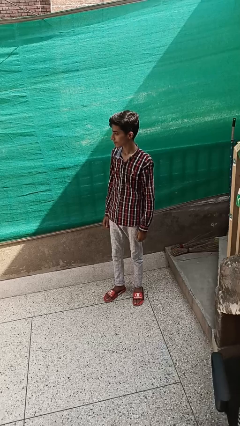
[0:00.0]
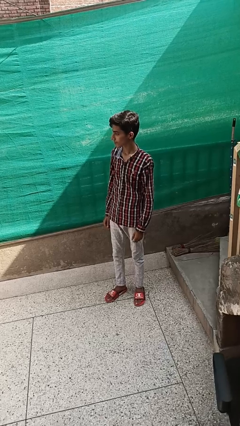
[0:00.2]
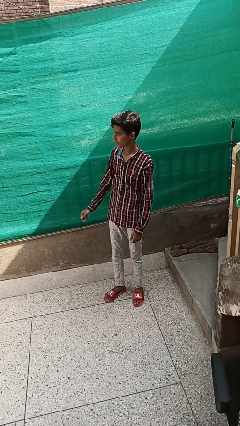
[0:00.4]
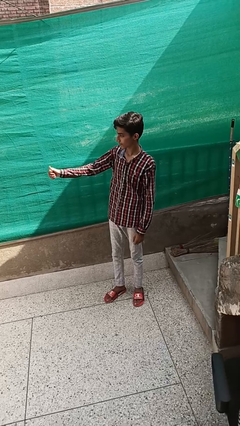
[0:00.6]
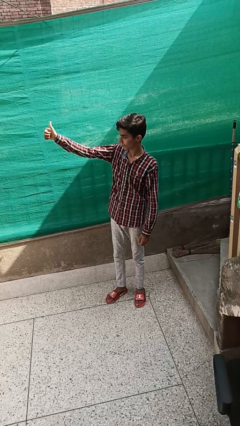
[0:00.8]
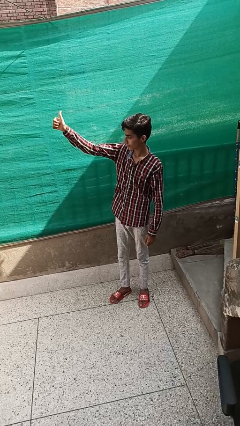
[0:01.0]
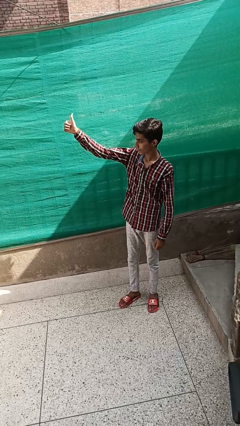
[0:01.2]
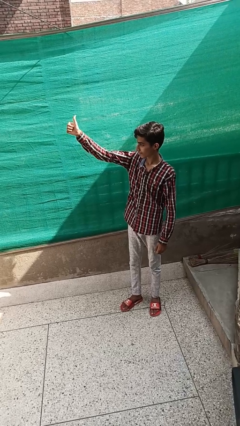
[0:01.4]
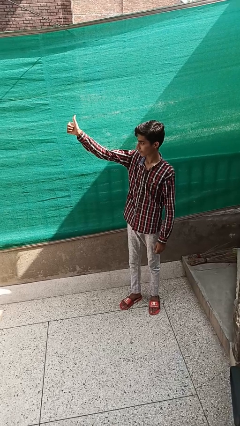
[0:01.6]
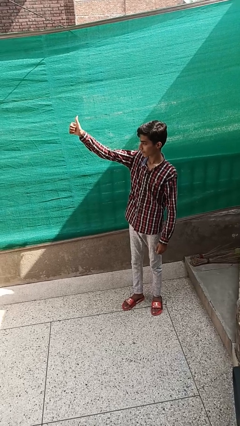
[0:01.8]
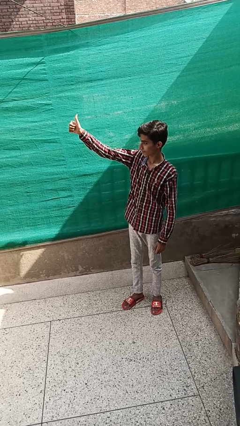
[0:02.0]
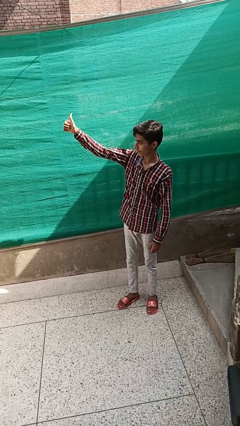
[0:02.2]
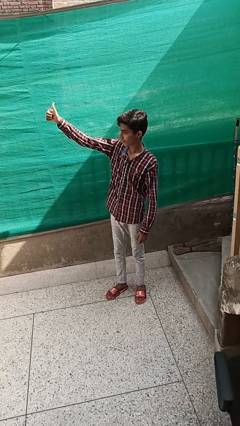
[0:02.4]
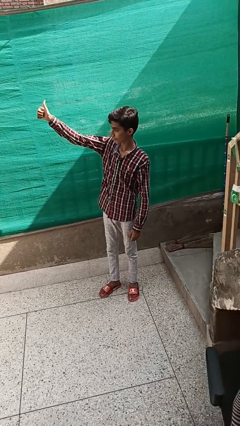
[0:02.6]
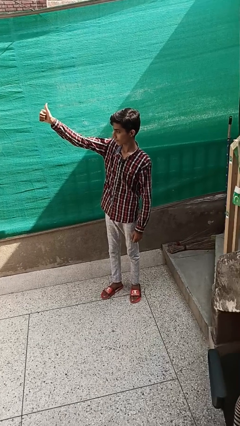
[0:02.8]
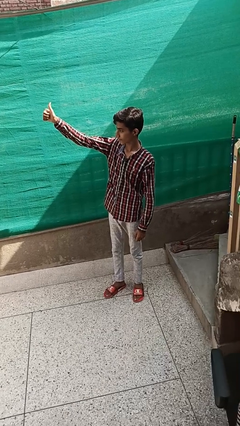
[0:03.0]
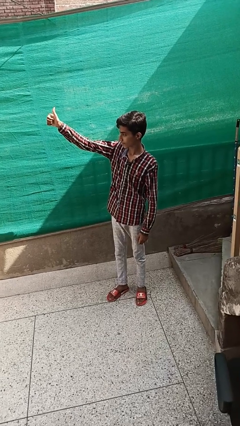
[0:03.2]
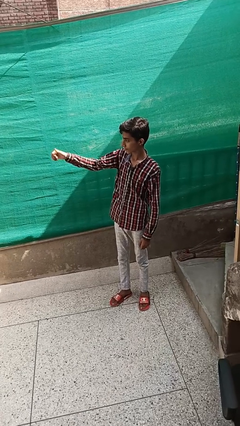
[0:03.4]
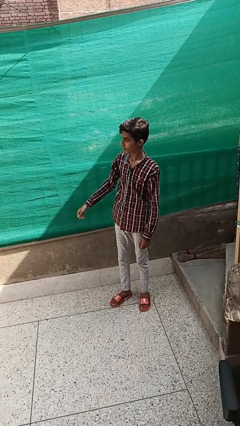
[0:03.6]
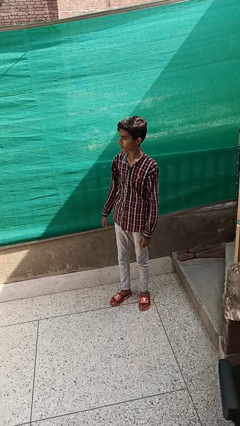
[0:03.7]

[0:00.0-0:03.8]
person gestures thumbs up

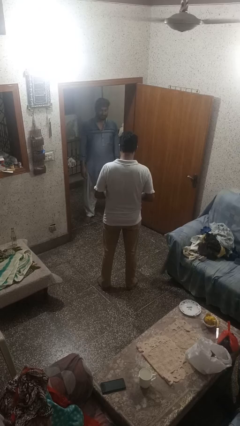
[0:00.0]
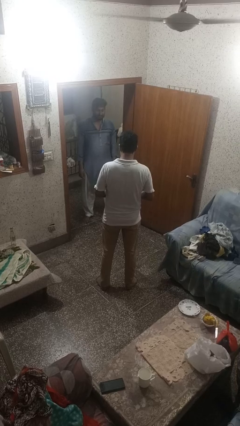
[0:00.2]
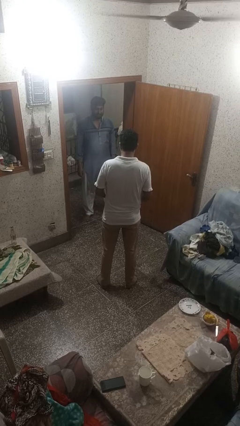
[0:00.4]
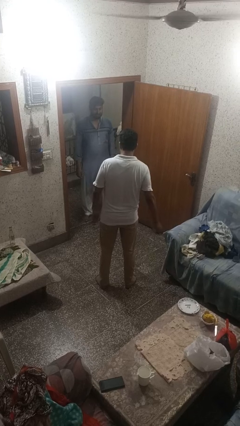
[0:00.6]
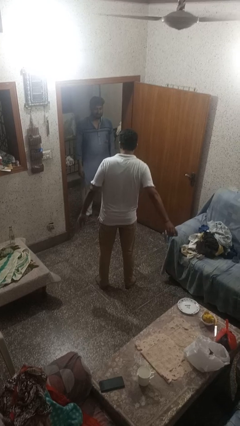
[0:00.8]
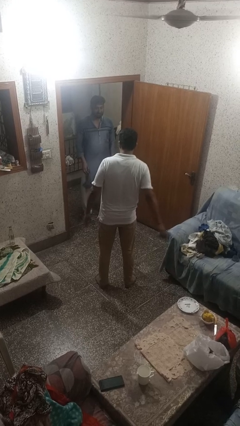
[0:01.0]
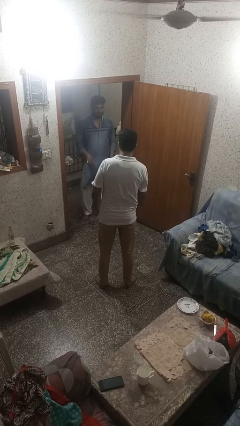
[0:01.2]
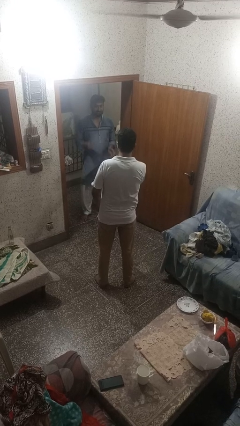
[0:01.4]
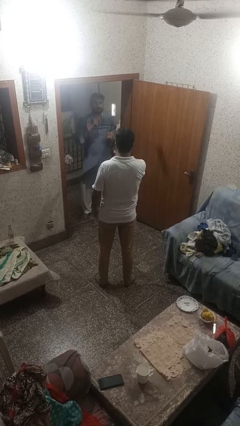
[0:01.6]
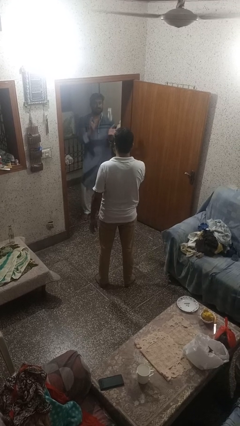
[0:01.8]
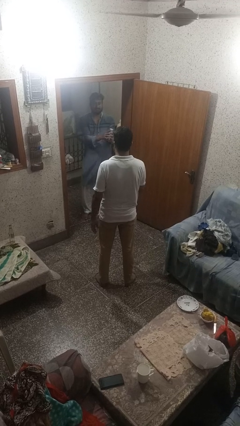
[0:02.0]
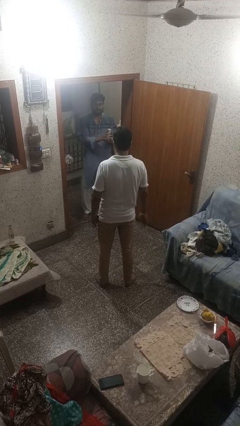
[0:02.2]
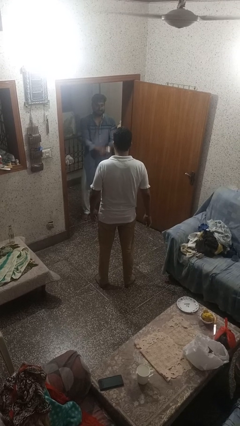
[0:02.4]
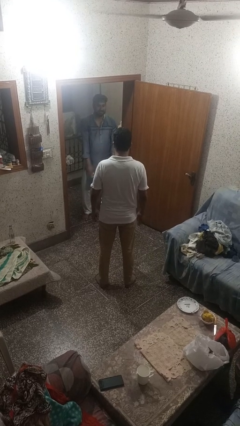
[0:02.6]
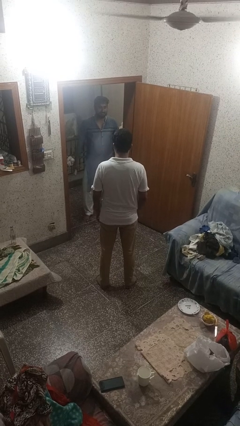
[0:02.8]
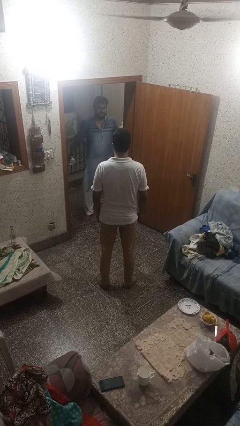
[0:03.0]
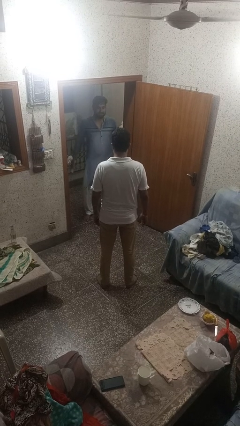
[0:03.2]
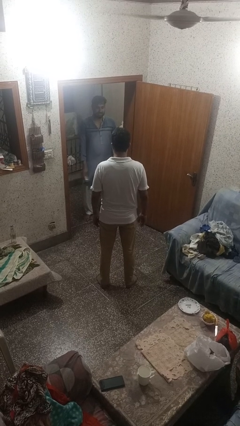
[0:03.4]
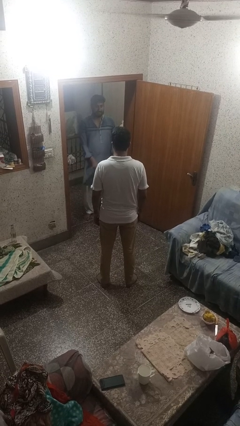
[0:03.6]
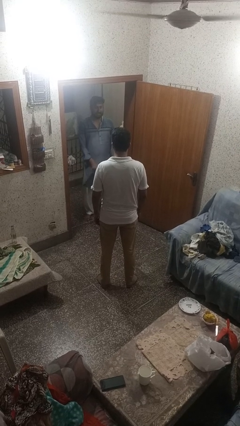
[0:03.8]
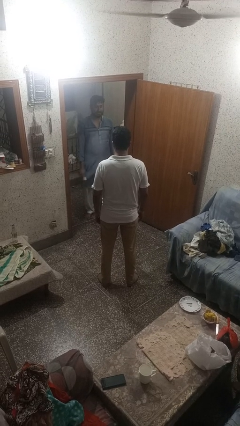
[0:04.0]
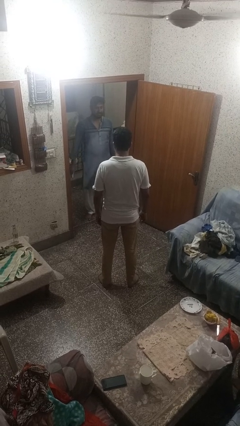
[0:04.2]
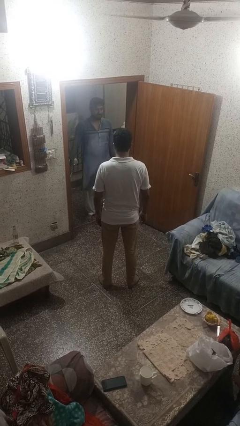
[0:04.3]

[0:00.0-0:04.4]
person throws object to person

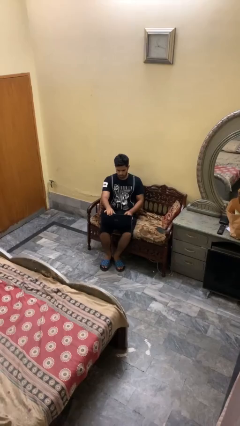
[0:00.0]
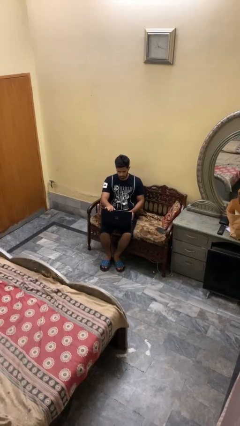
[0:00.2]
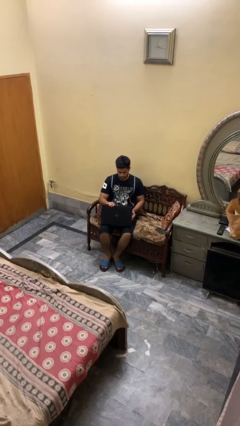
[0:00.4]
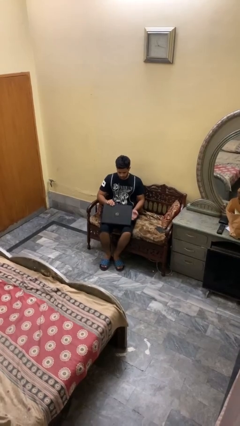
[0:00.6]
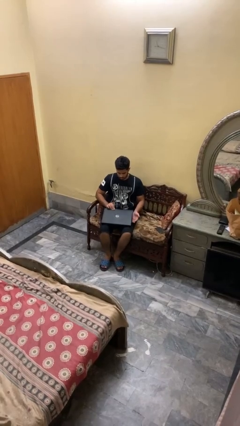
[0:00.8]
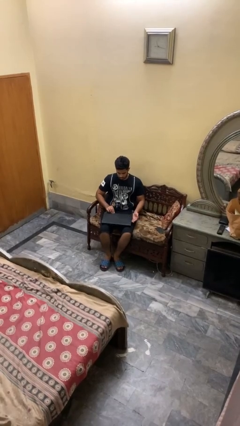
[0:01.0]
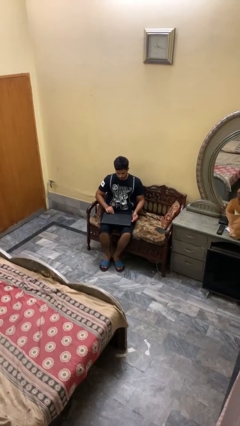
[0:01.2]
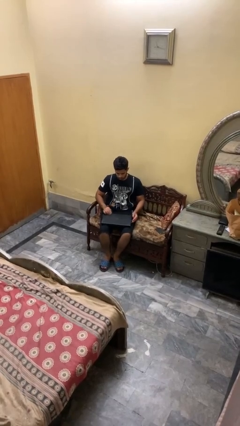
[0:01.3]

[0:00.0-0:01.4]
person closes laptop

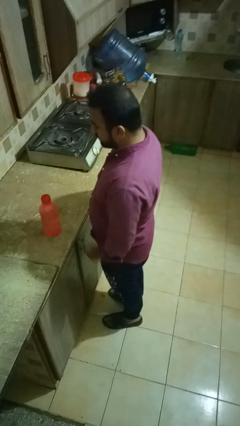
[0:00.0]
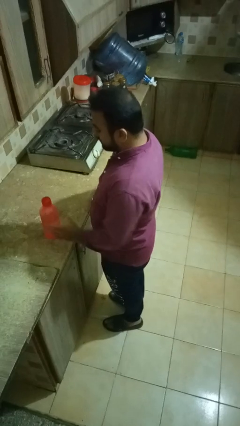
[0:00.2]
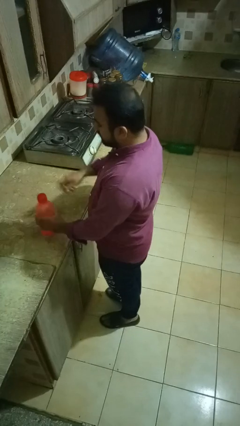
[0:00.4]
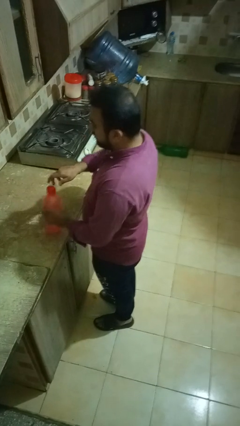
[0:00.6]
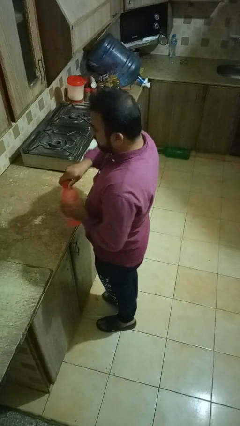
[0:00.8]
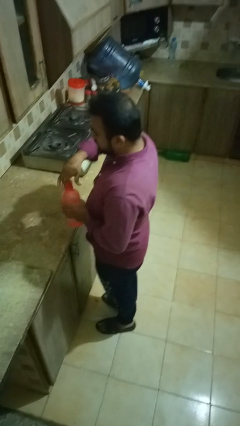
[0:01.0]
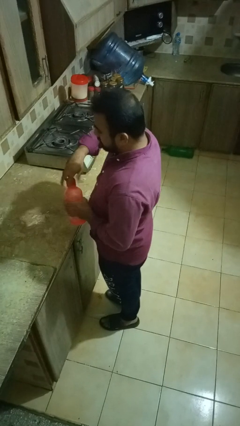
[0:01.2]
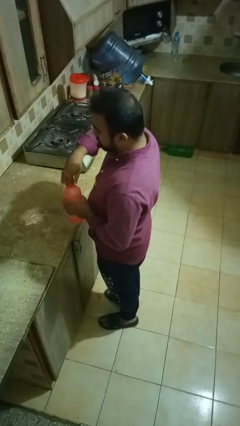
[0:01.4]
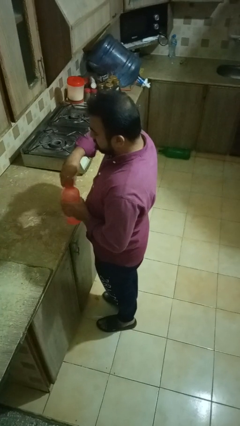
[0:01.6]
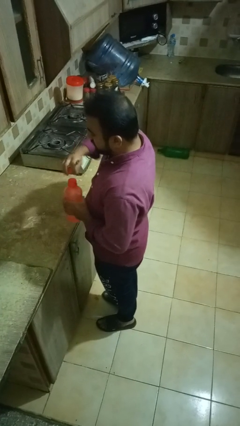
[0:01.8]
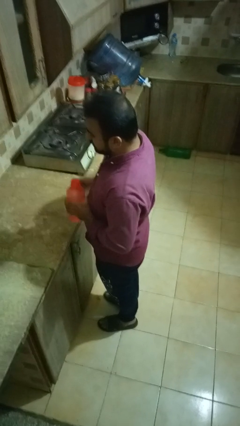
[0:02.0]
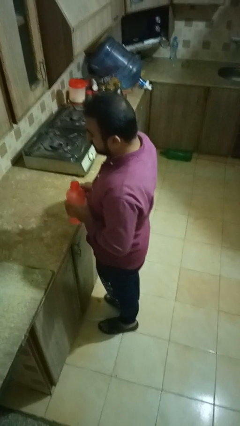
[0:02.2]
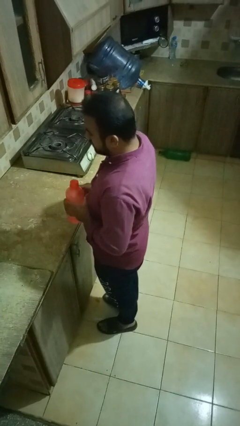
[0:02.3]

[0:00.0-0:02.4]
person unscrews lid from bottle

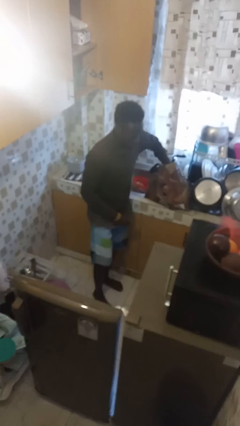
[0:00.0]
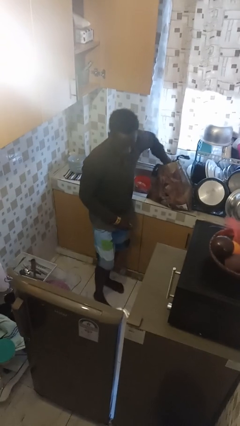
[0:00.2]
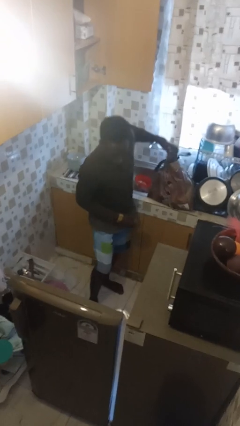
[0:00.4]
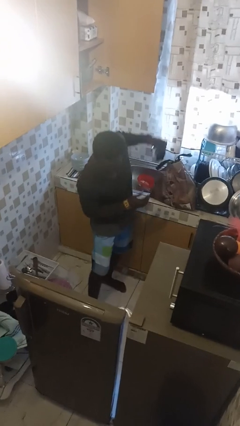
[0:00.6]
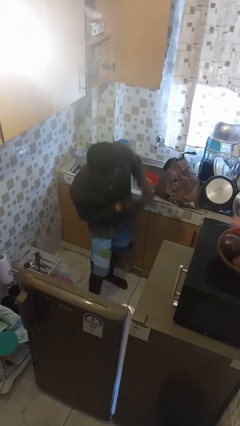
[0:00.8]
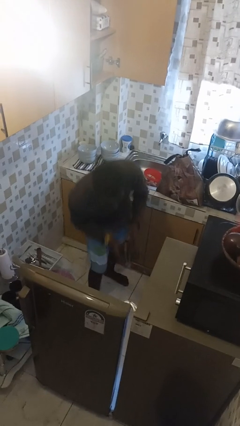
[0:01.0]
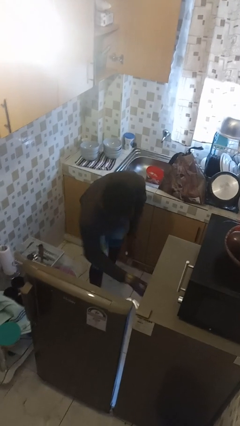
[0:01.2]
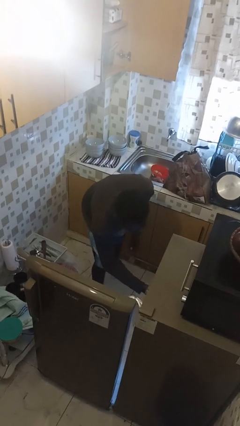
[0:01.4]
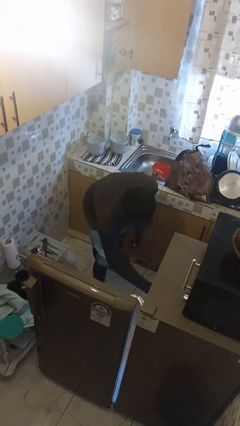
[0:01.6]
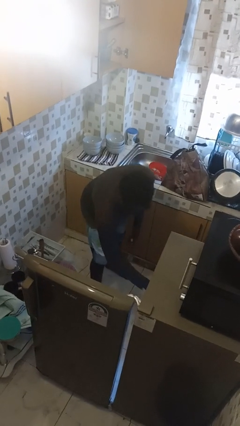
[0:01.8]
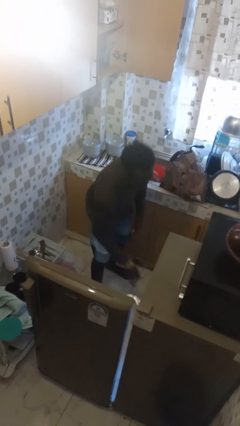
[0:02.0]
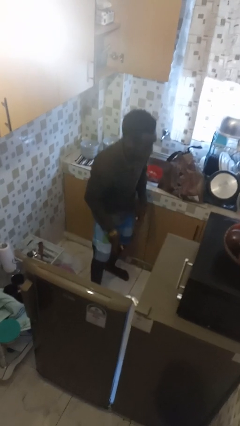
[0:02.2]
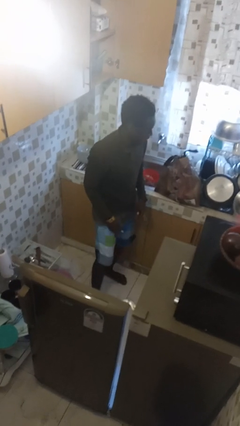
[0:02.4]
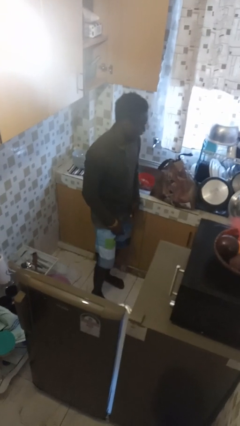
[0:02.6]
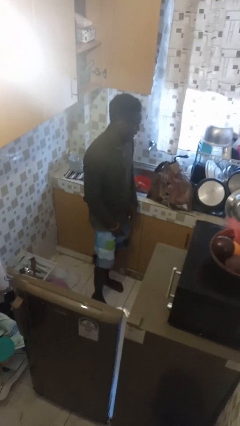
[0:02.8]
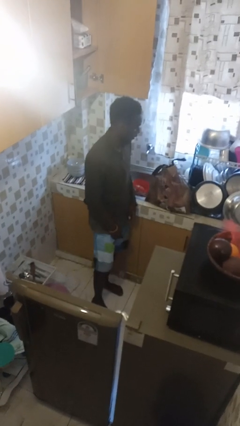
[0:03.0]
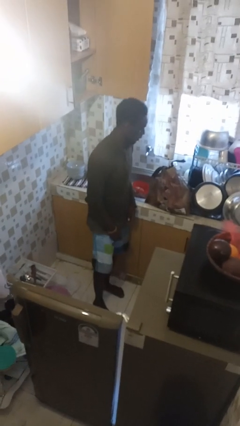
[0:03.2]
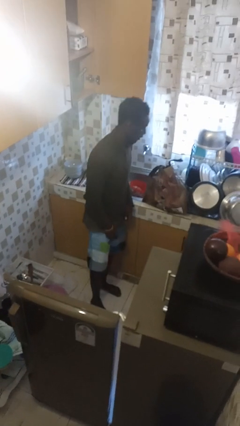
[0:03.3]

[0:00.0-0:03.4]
person loads groceries into refrigerator

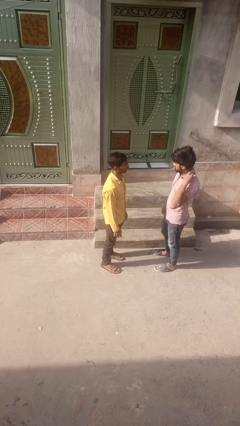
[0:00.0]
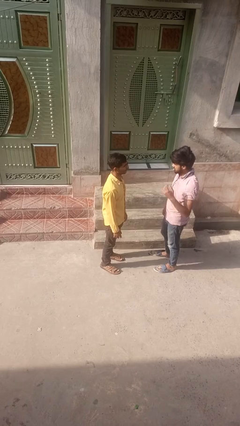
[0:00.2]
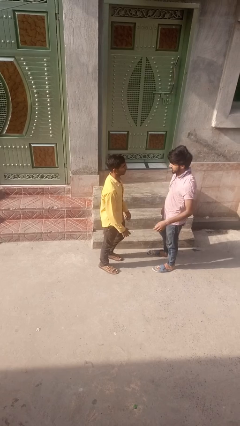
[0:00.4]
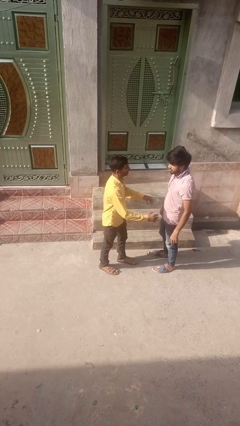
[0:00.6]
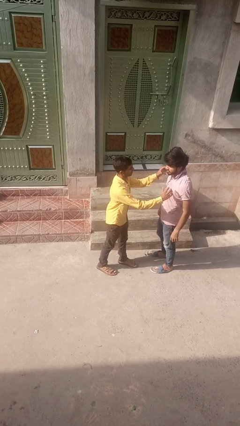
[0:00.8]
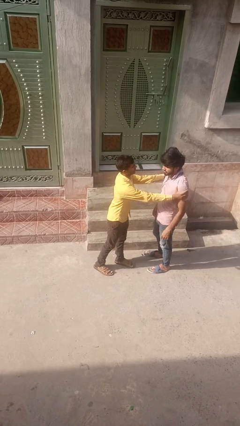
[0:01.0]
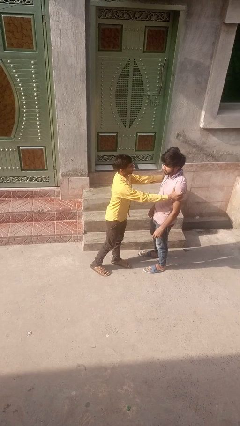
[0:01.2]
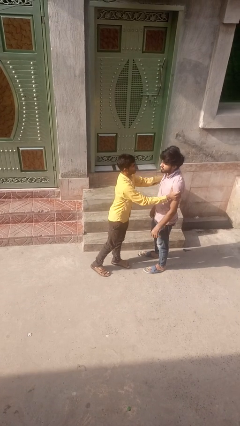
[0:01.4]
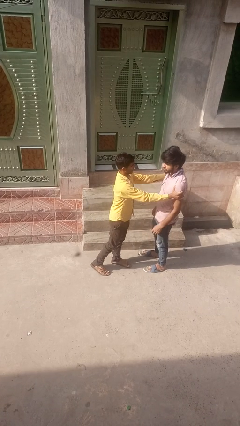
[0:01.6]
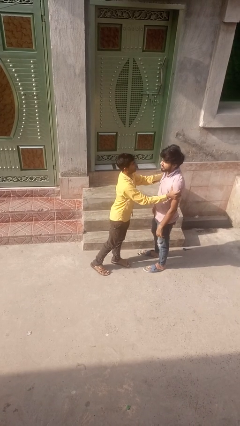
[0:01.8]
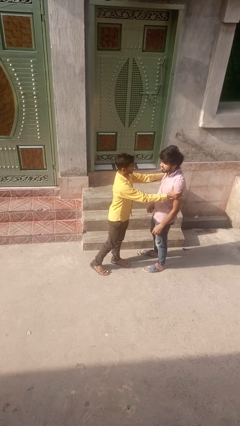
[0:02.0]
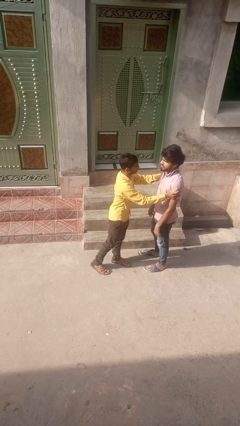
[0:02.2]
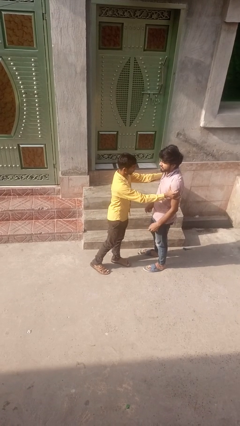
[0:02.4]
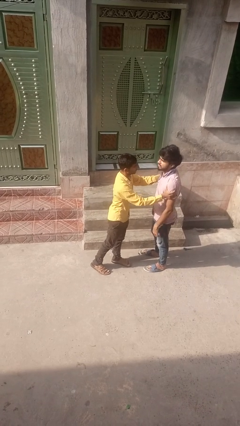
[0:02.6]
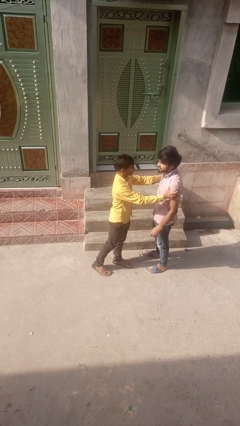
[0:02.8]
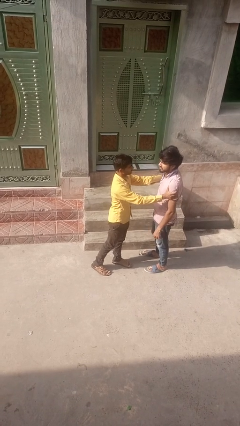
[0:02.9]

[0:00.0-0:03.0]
person grabs person by bicep
